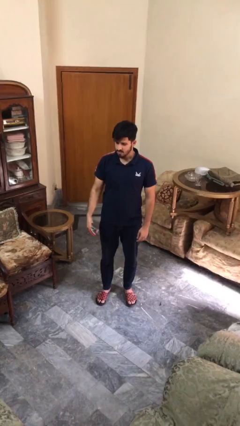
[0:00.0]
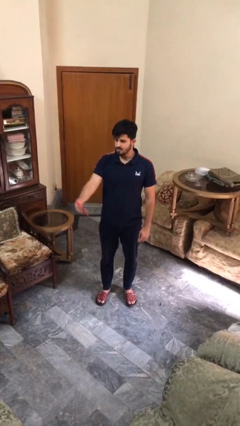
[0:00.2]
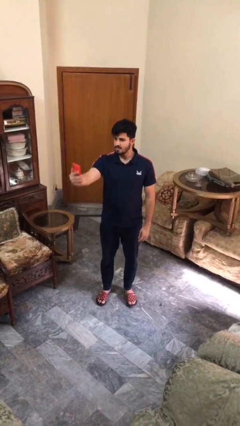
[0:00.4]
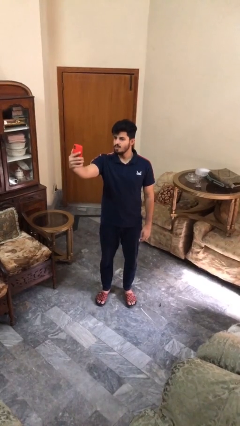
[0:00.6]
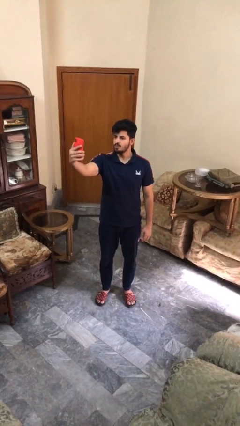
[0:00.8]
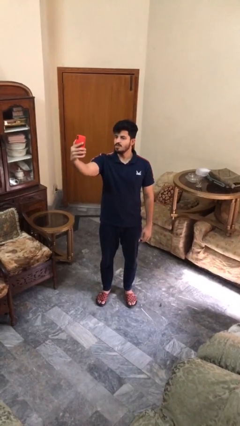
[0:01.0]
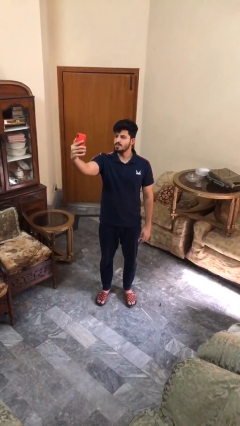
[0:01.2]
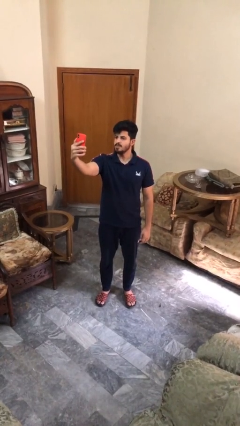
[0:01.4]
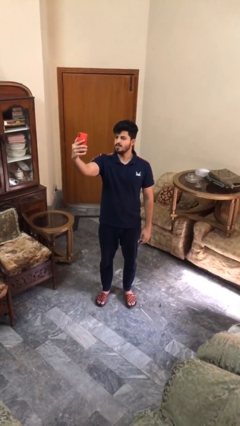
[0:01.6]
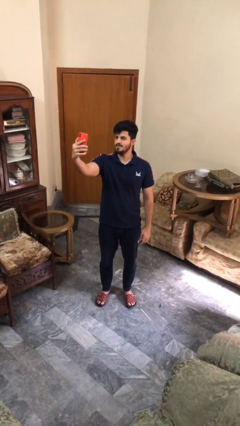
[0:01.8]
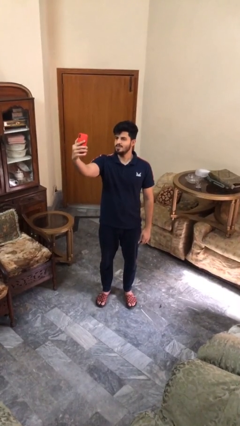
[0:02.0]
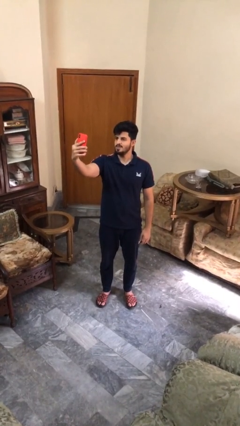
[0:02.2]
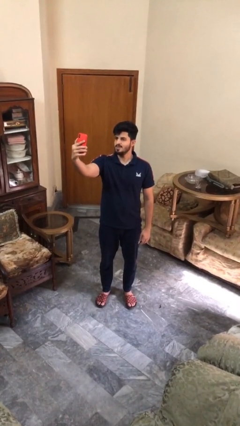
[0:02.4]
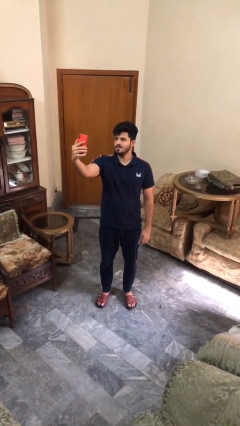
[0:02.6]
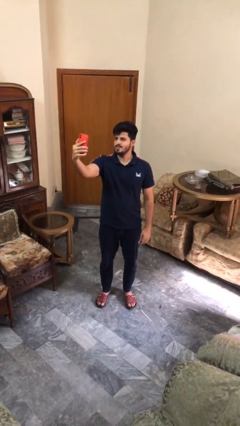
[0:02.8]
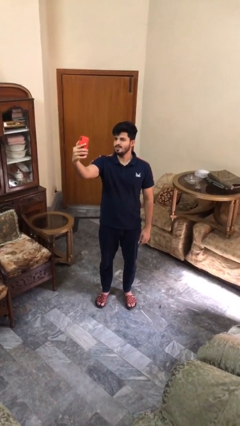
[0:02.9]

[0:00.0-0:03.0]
person takes selfie

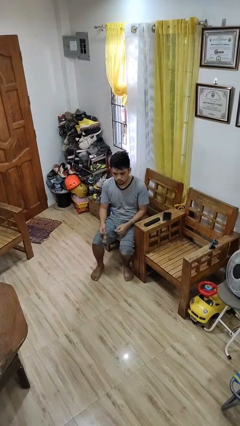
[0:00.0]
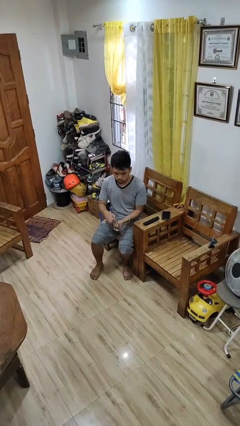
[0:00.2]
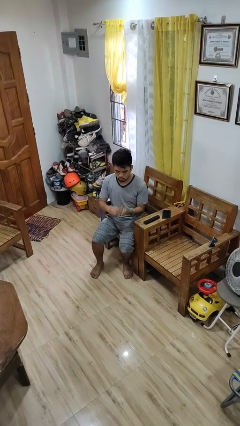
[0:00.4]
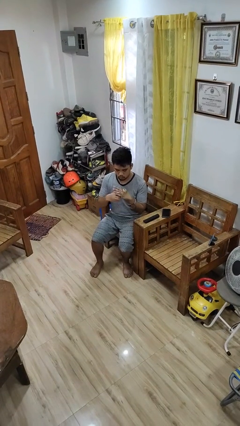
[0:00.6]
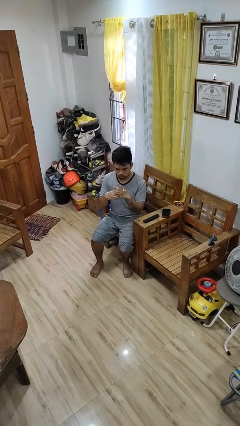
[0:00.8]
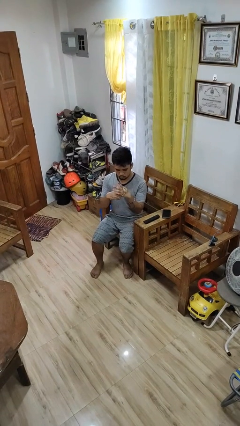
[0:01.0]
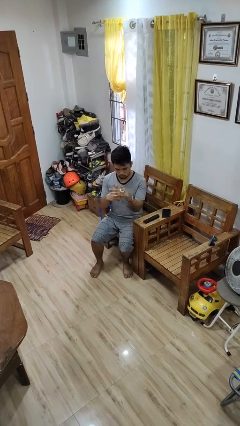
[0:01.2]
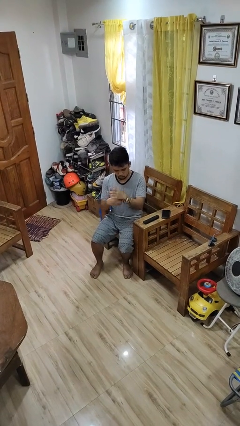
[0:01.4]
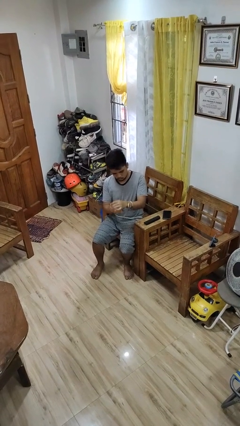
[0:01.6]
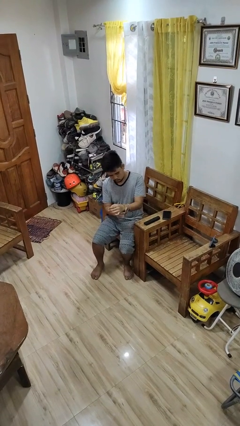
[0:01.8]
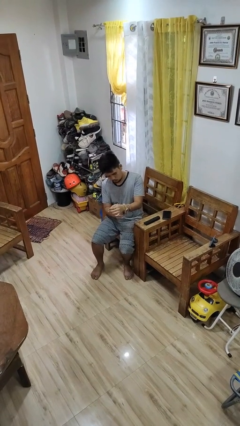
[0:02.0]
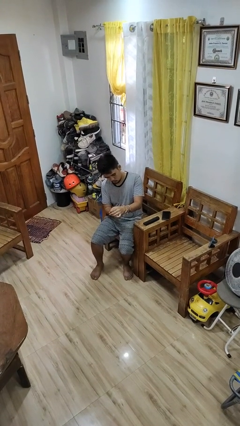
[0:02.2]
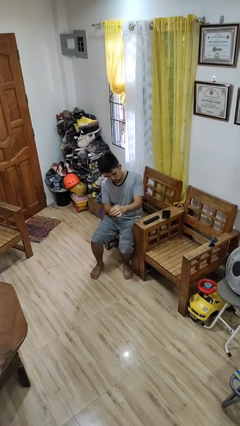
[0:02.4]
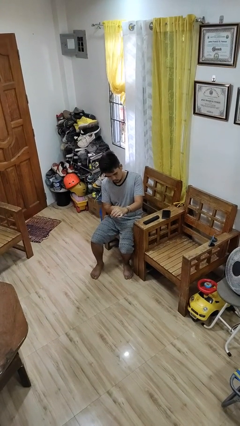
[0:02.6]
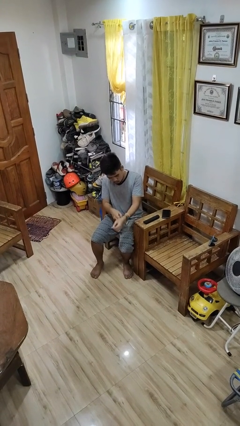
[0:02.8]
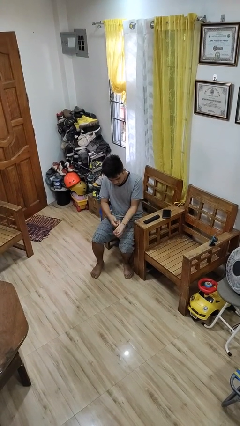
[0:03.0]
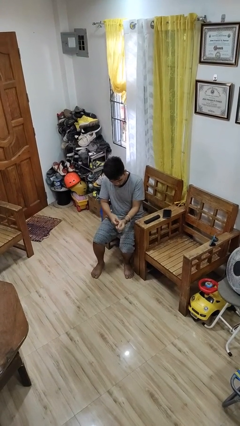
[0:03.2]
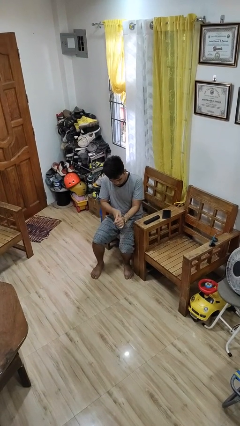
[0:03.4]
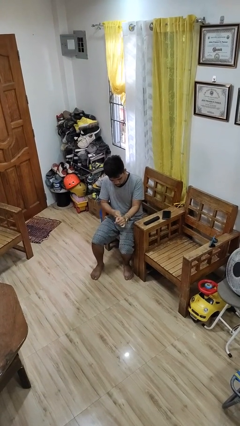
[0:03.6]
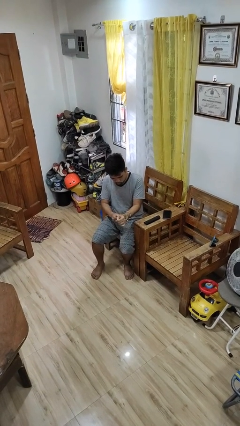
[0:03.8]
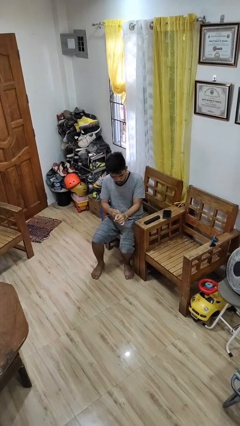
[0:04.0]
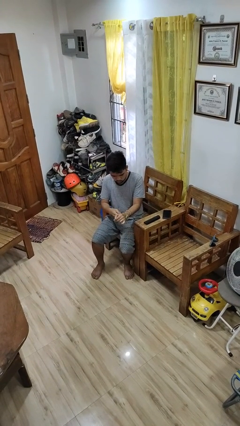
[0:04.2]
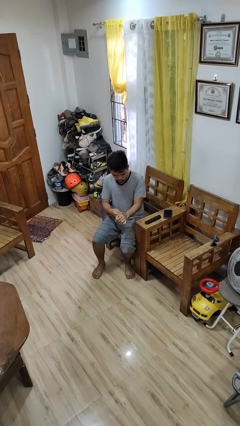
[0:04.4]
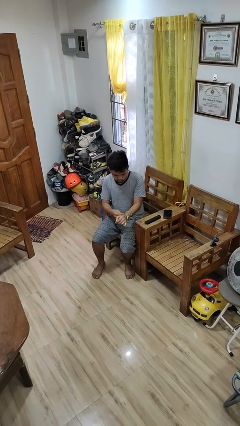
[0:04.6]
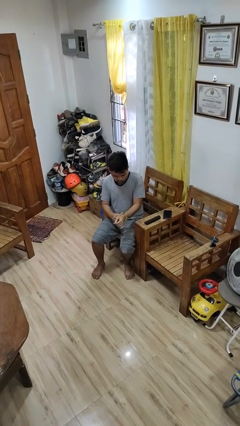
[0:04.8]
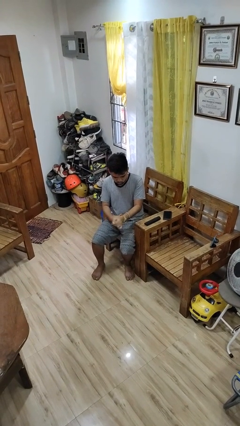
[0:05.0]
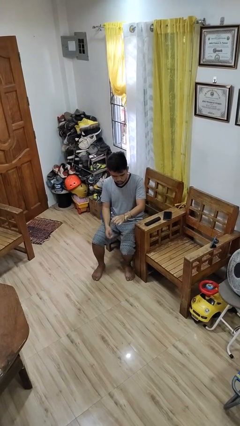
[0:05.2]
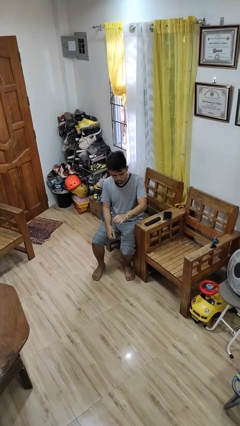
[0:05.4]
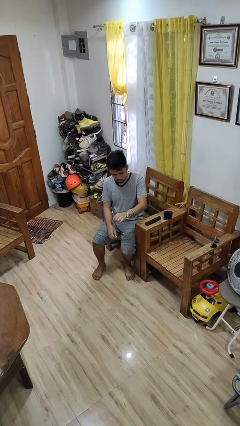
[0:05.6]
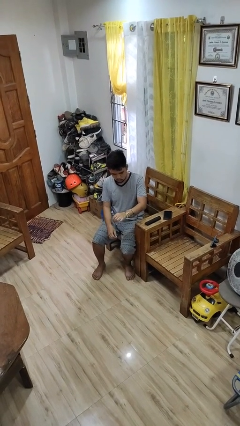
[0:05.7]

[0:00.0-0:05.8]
person puts on wristwatch

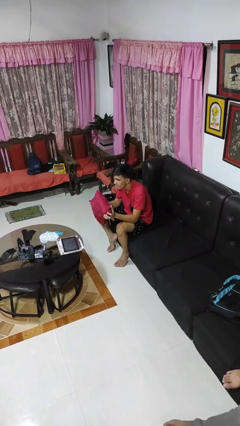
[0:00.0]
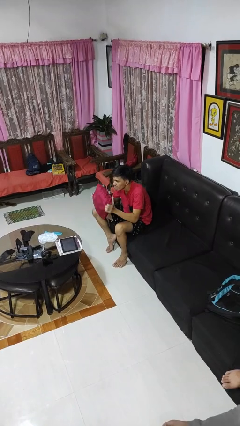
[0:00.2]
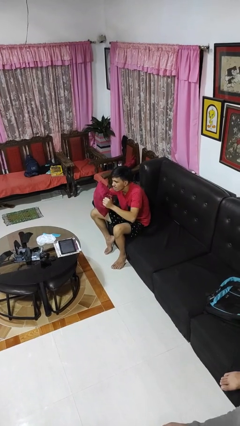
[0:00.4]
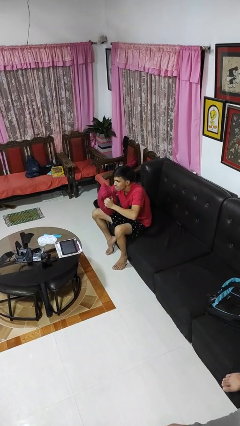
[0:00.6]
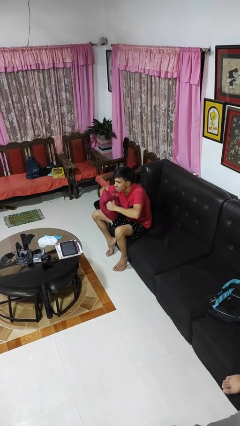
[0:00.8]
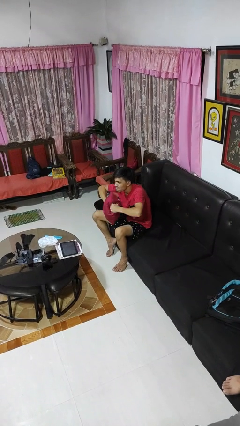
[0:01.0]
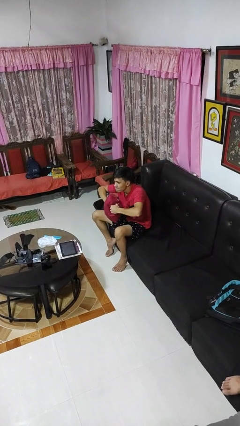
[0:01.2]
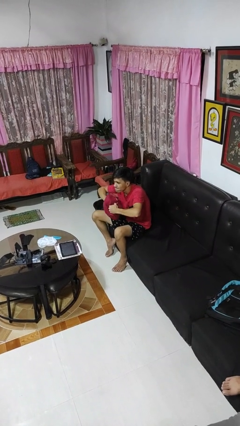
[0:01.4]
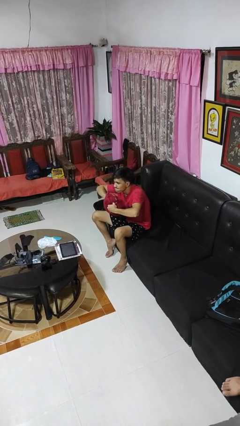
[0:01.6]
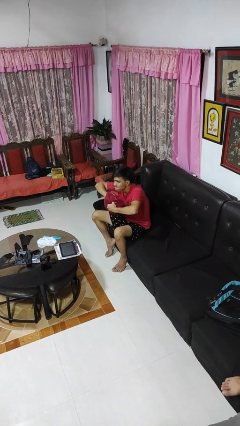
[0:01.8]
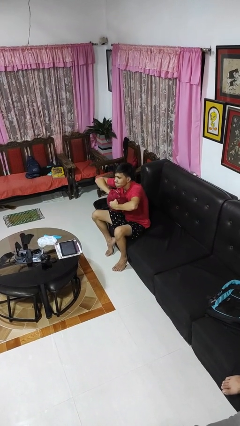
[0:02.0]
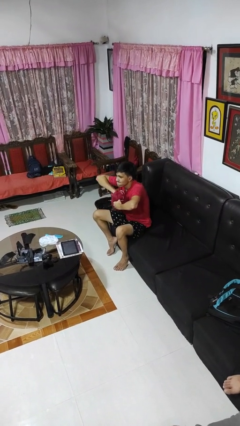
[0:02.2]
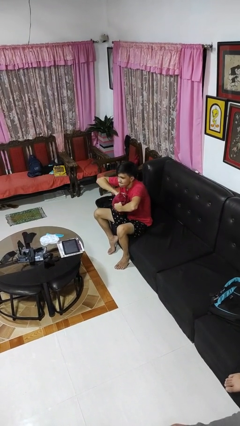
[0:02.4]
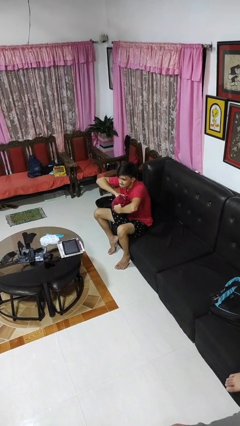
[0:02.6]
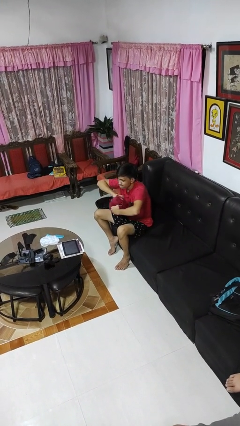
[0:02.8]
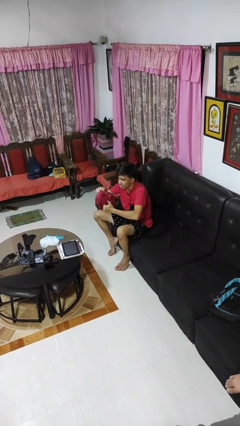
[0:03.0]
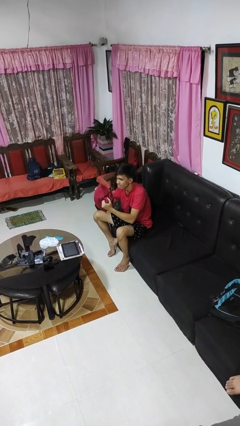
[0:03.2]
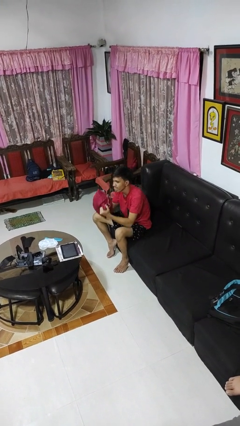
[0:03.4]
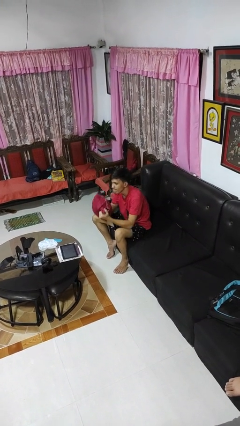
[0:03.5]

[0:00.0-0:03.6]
person squeezes object

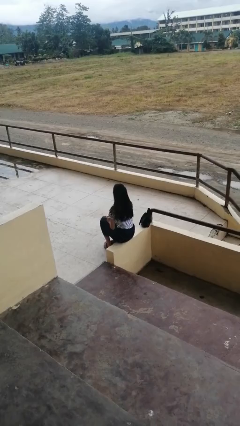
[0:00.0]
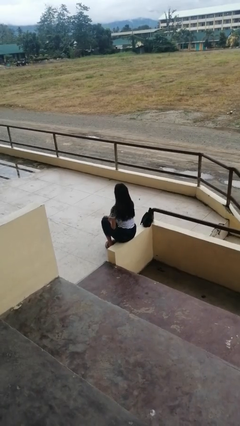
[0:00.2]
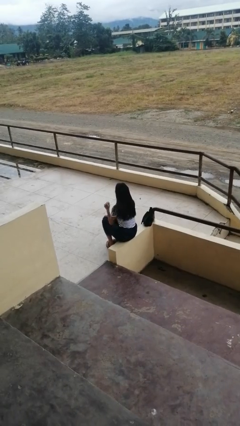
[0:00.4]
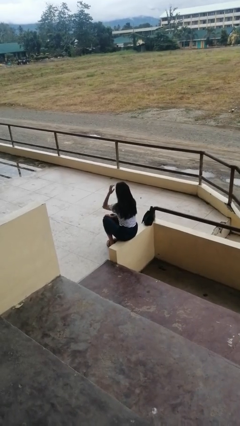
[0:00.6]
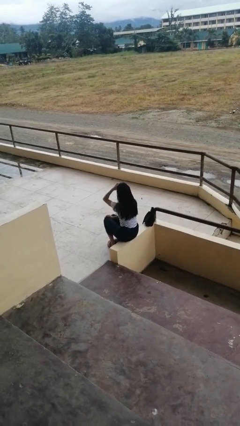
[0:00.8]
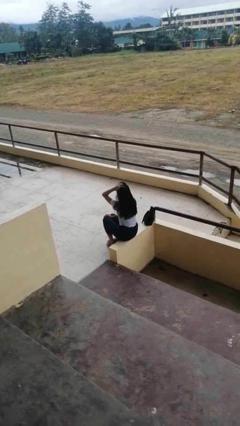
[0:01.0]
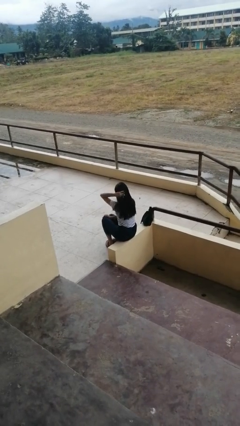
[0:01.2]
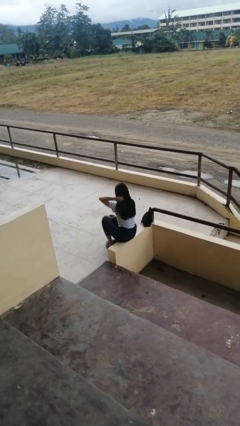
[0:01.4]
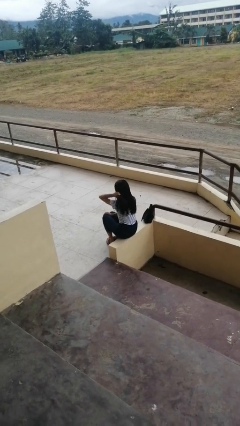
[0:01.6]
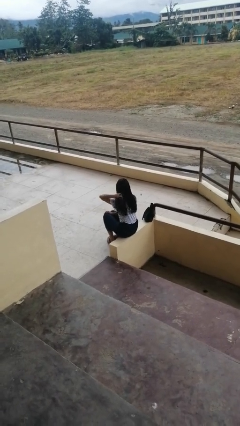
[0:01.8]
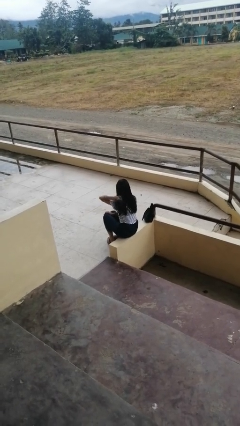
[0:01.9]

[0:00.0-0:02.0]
person strokes hair

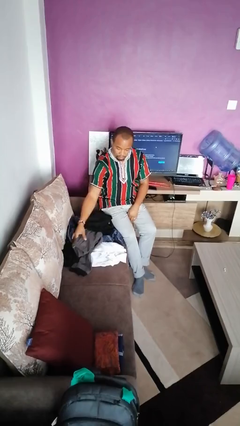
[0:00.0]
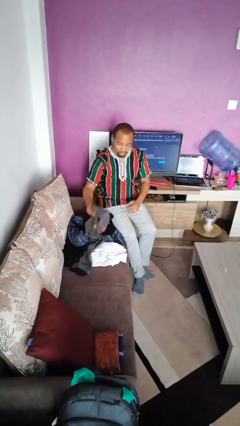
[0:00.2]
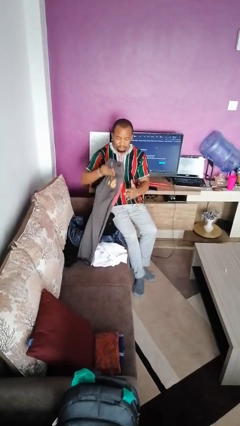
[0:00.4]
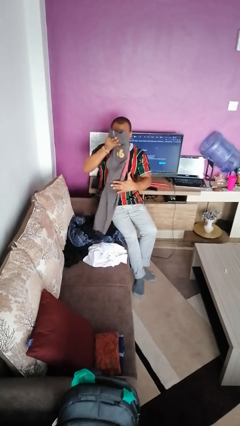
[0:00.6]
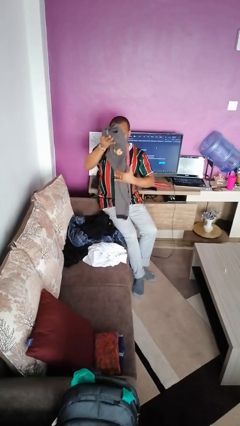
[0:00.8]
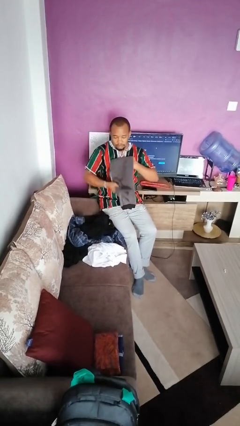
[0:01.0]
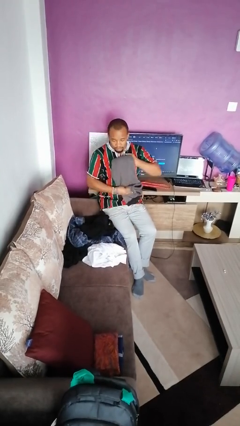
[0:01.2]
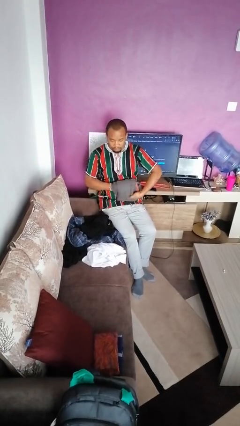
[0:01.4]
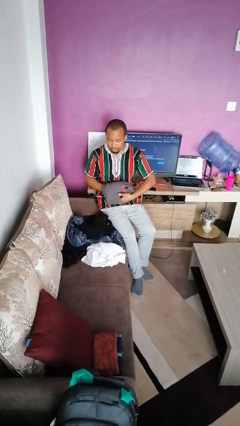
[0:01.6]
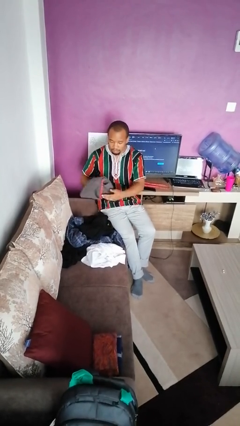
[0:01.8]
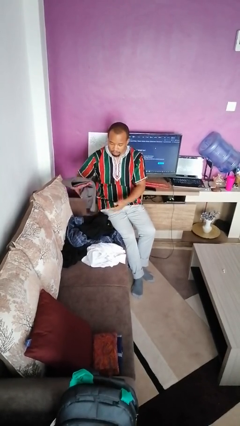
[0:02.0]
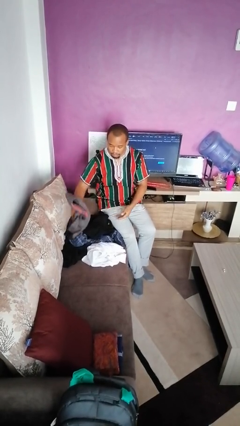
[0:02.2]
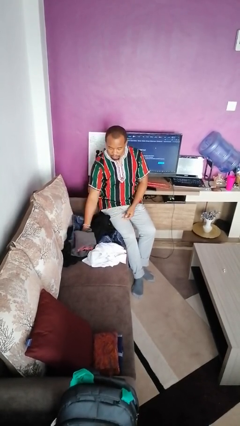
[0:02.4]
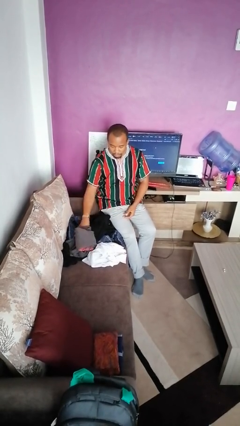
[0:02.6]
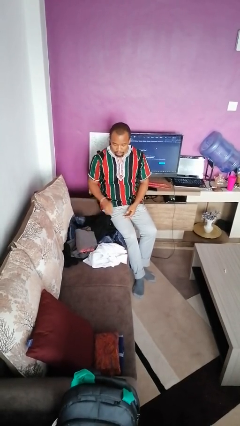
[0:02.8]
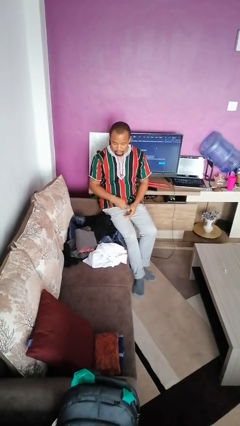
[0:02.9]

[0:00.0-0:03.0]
person folds pants

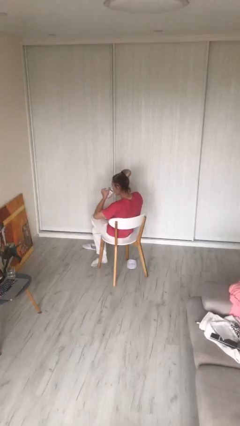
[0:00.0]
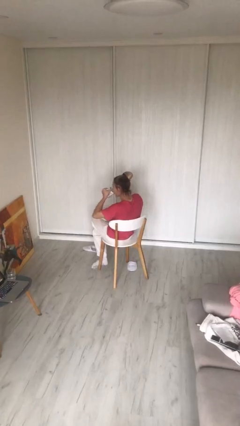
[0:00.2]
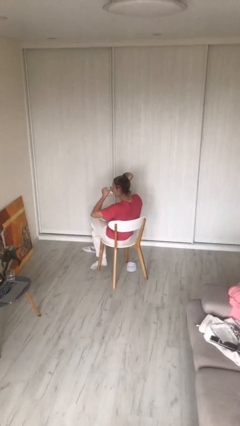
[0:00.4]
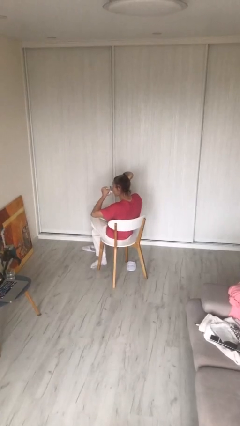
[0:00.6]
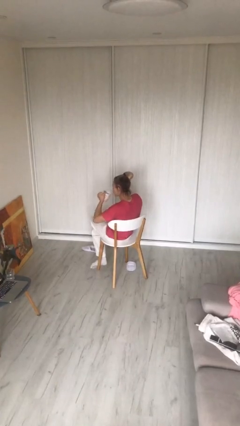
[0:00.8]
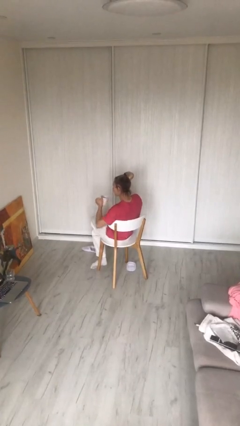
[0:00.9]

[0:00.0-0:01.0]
person drinks from mug
